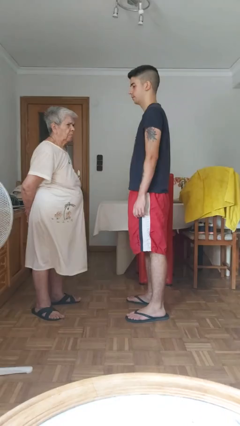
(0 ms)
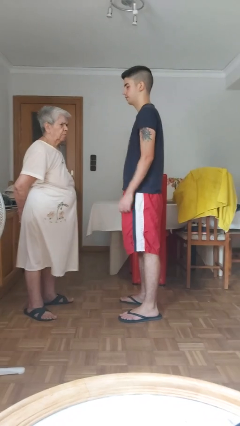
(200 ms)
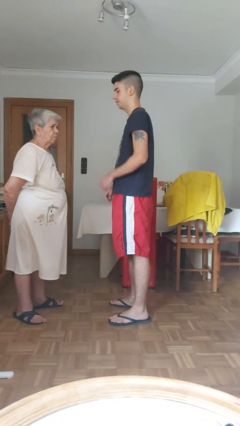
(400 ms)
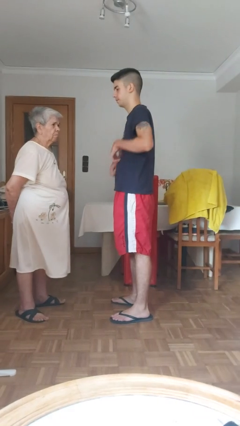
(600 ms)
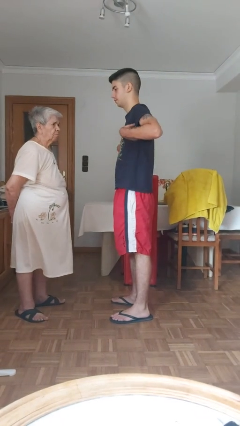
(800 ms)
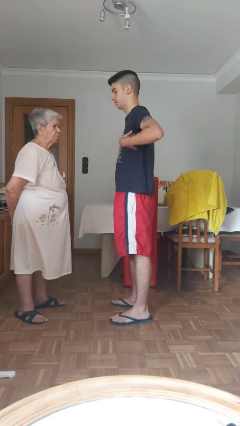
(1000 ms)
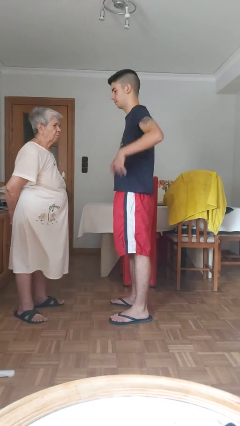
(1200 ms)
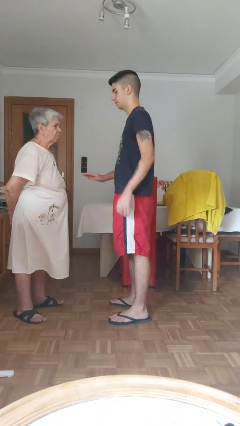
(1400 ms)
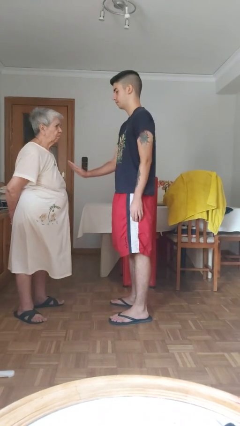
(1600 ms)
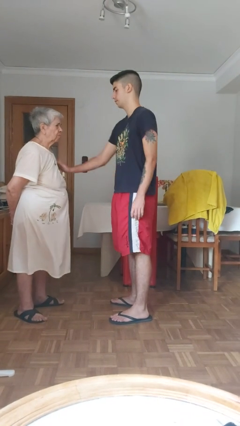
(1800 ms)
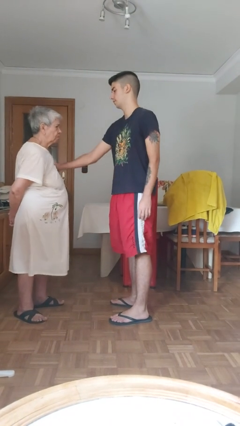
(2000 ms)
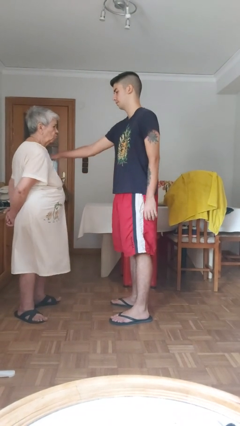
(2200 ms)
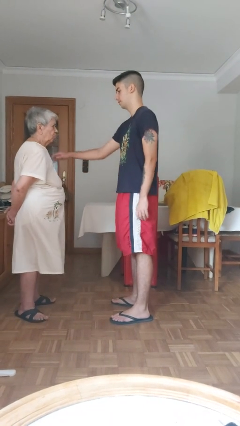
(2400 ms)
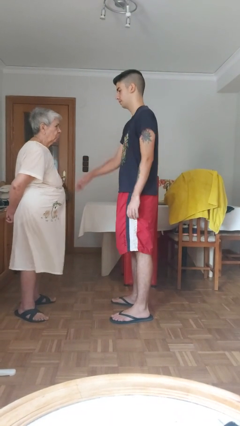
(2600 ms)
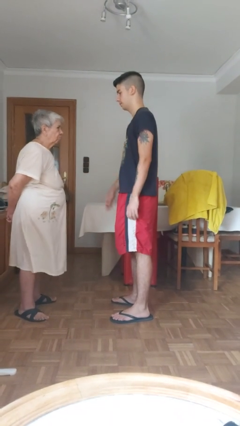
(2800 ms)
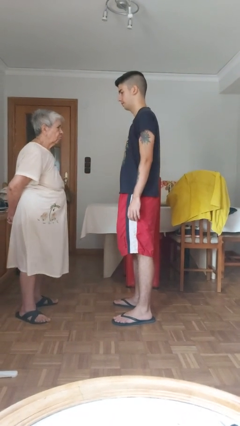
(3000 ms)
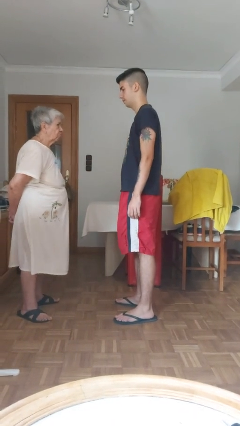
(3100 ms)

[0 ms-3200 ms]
person shoves person

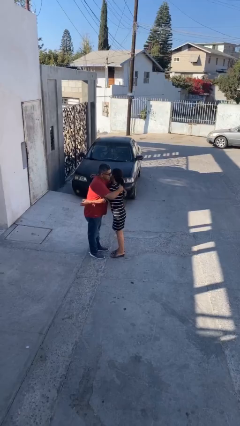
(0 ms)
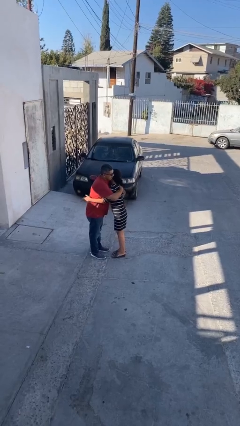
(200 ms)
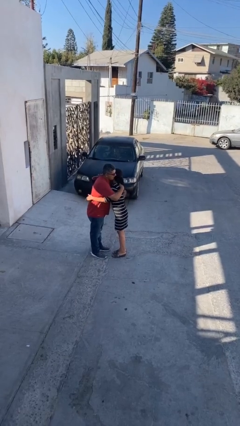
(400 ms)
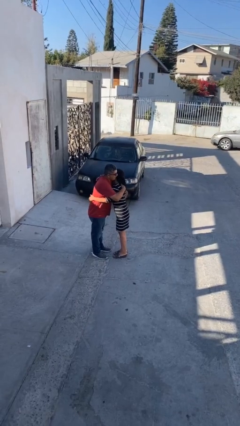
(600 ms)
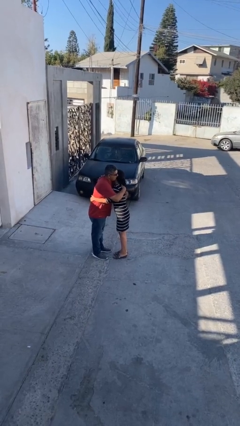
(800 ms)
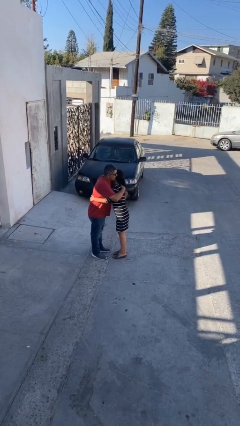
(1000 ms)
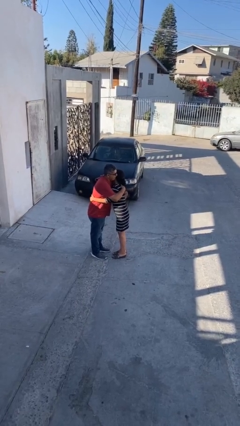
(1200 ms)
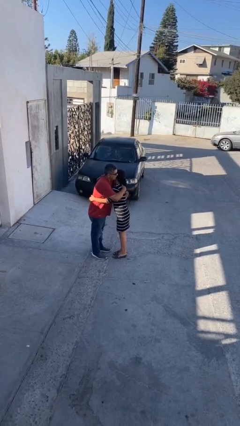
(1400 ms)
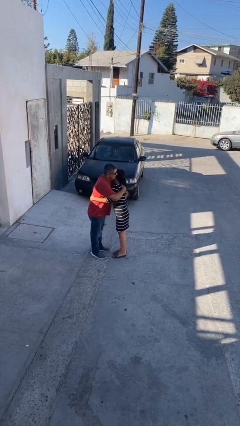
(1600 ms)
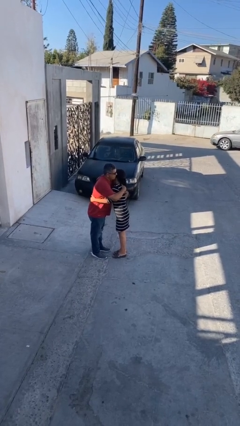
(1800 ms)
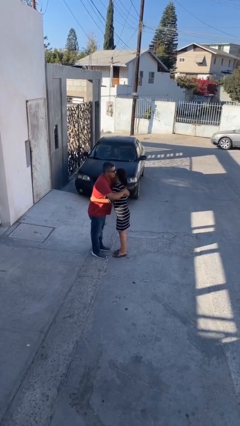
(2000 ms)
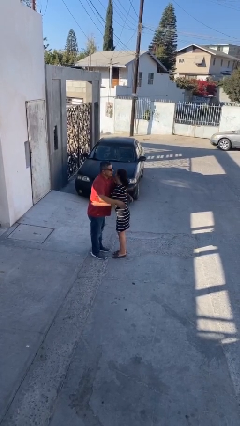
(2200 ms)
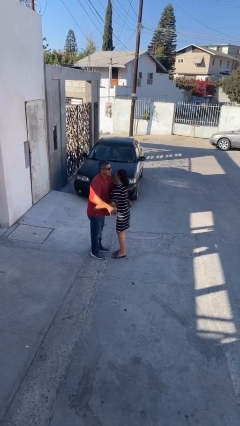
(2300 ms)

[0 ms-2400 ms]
person embraces person

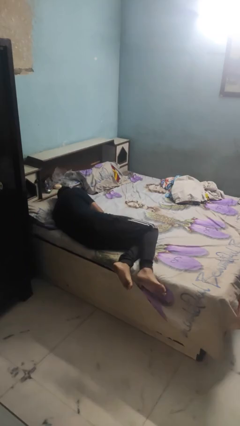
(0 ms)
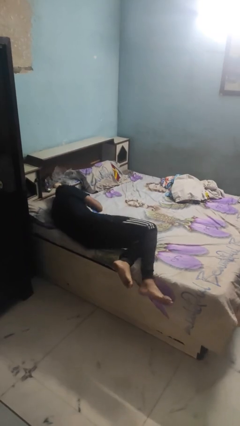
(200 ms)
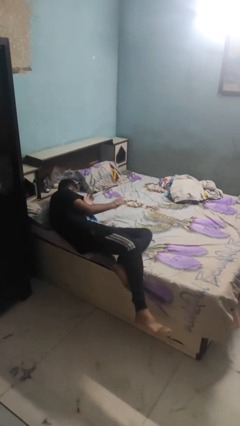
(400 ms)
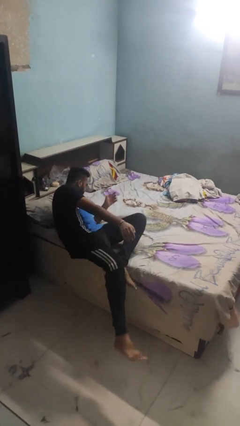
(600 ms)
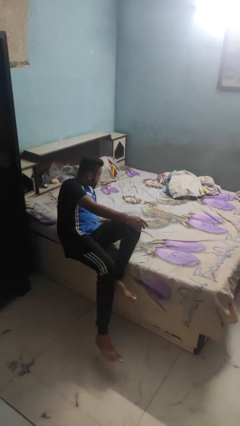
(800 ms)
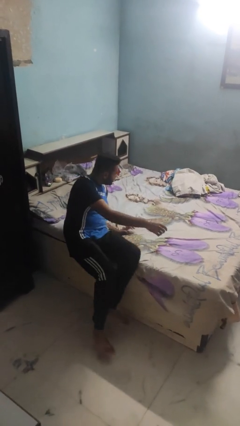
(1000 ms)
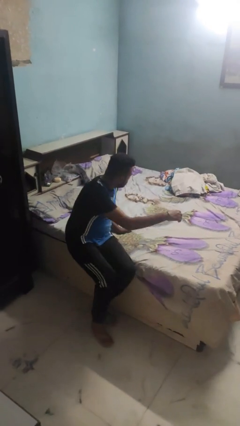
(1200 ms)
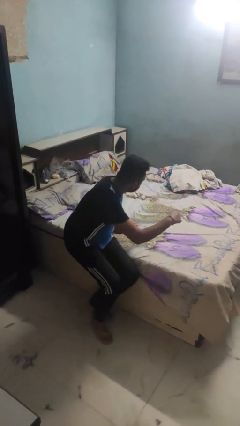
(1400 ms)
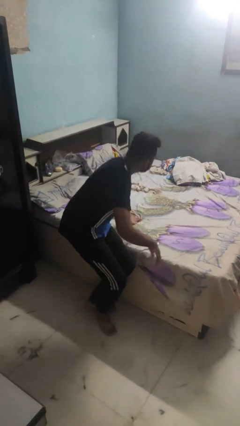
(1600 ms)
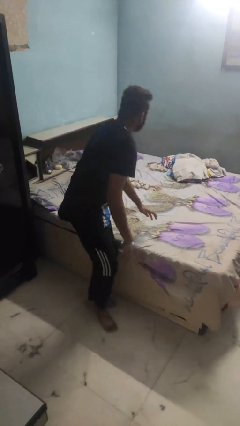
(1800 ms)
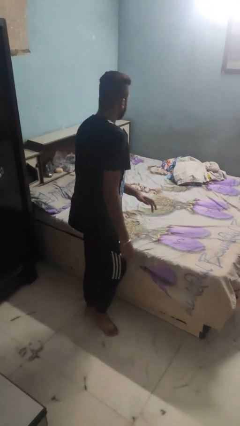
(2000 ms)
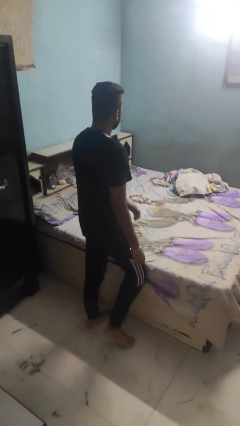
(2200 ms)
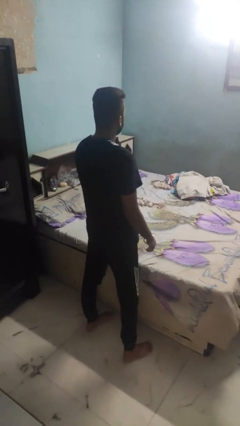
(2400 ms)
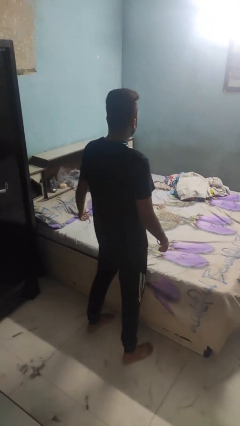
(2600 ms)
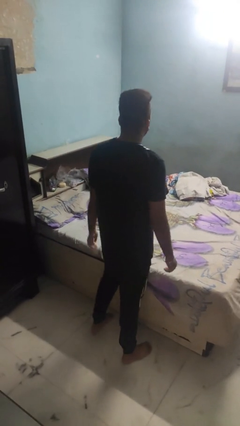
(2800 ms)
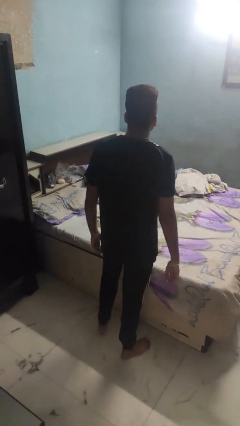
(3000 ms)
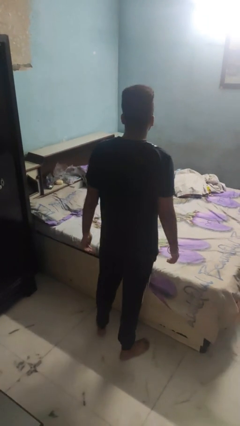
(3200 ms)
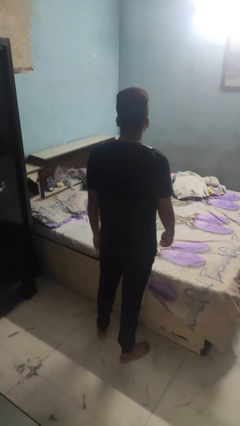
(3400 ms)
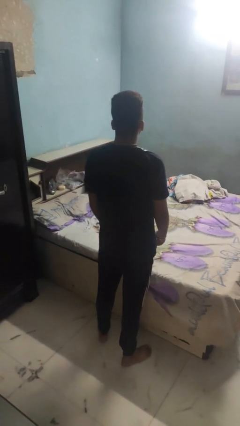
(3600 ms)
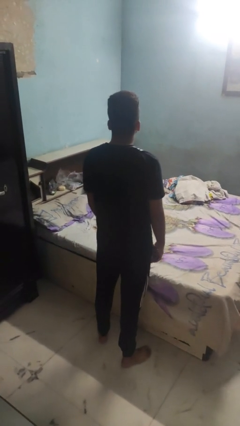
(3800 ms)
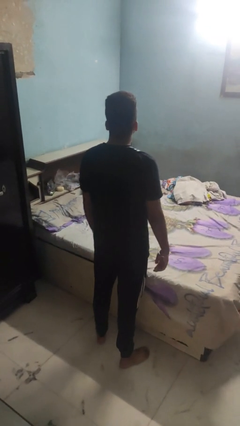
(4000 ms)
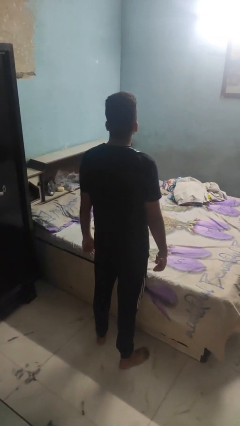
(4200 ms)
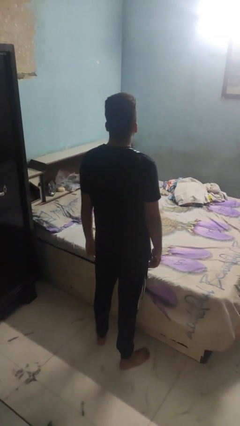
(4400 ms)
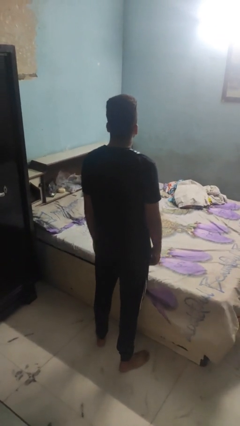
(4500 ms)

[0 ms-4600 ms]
person stands up

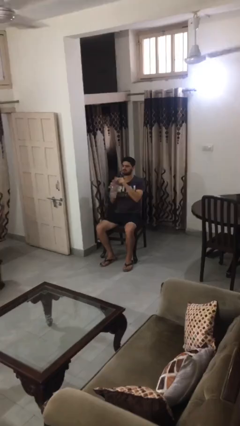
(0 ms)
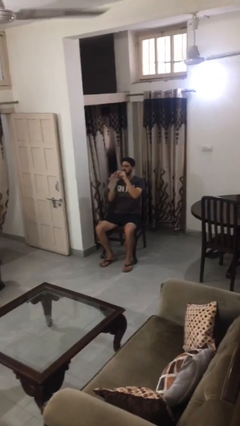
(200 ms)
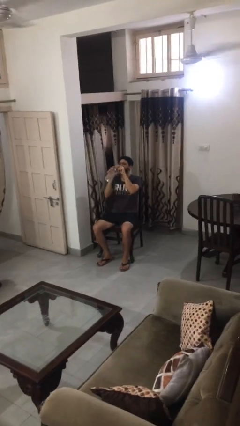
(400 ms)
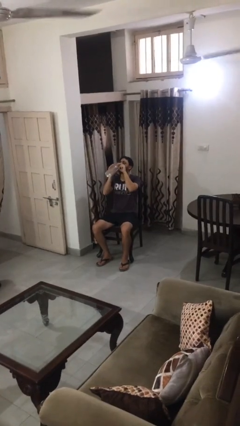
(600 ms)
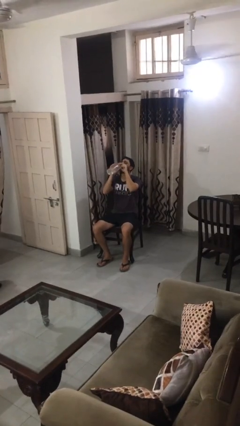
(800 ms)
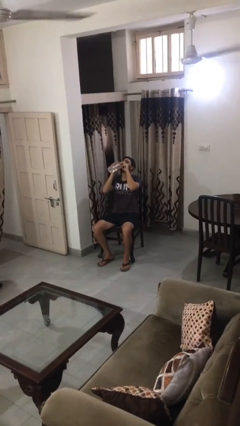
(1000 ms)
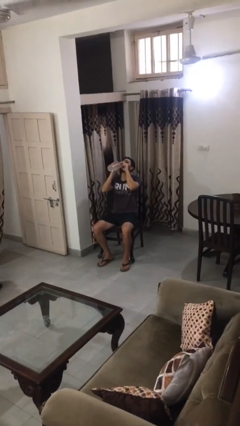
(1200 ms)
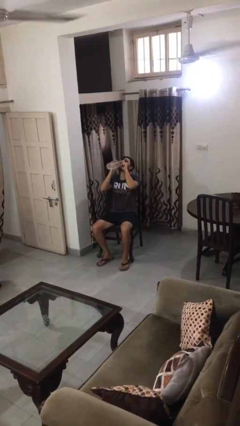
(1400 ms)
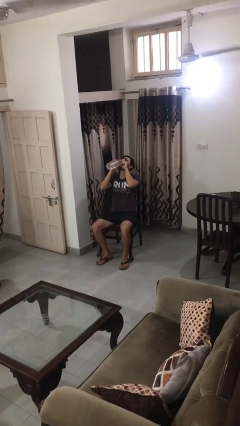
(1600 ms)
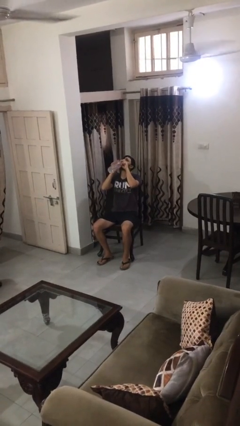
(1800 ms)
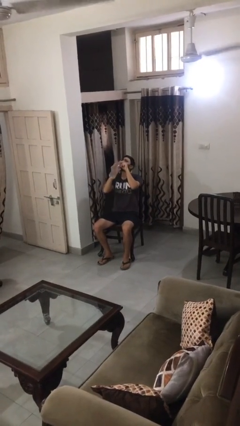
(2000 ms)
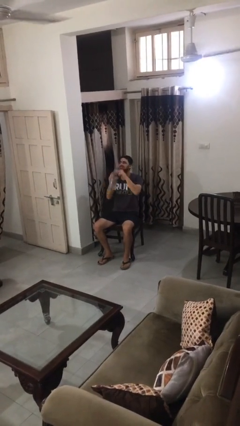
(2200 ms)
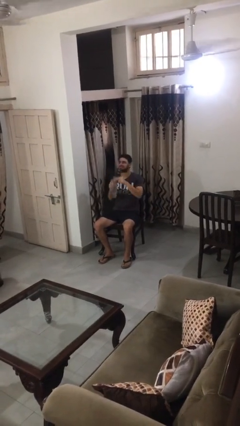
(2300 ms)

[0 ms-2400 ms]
person drinks from bottle

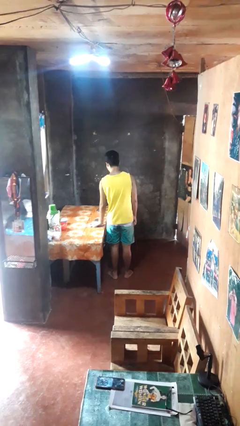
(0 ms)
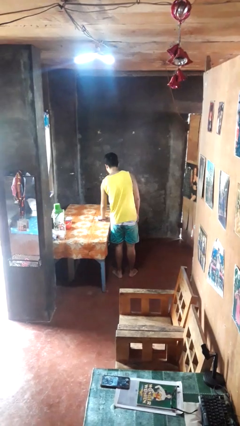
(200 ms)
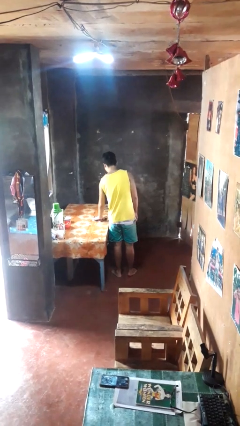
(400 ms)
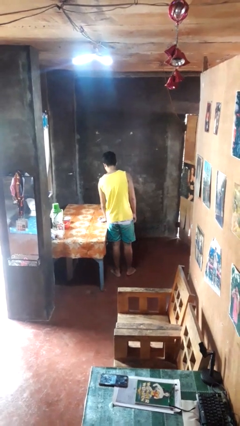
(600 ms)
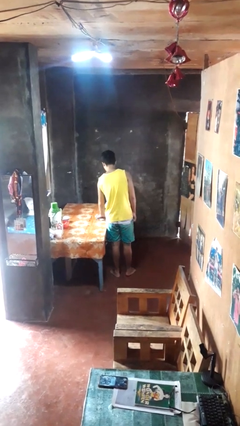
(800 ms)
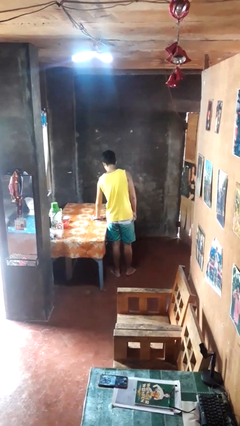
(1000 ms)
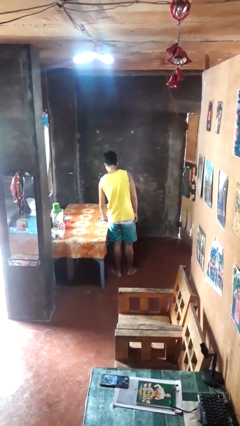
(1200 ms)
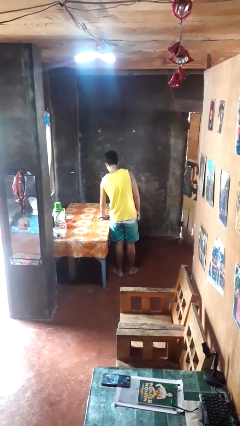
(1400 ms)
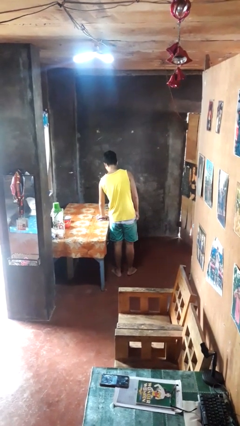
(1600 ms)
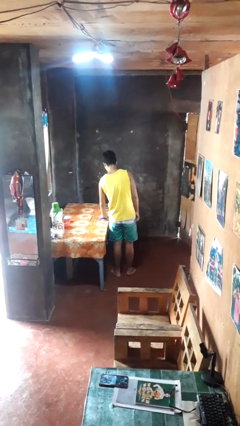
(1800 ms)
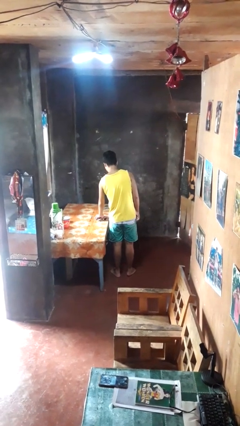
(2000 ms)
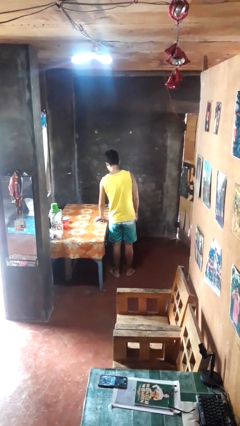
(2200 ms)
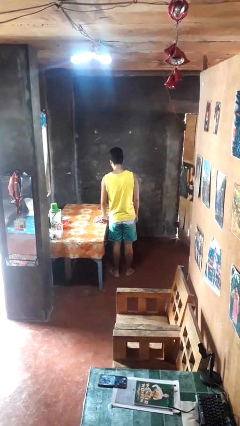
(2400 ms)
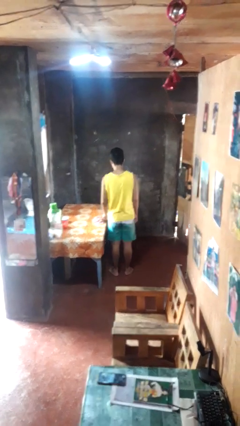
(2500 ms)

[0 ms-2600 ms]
person cleans table with rag

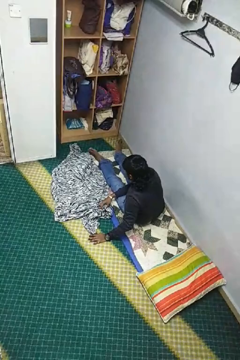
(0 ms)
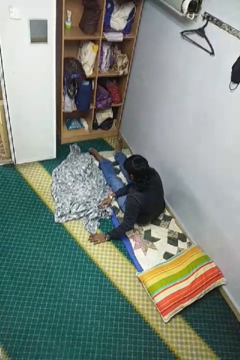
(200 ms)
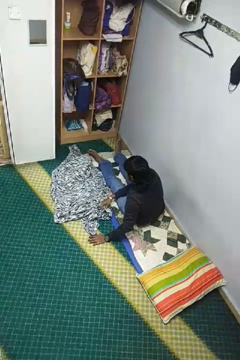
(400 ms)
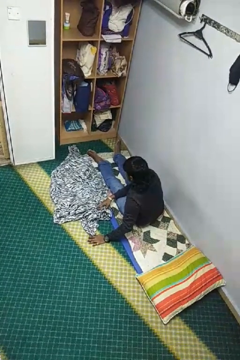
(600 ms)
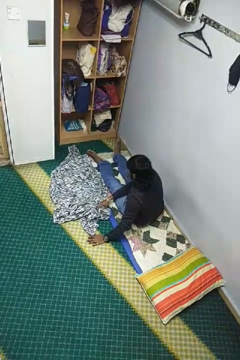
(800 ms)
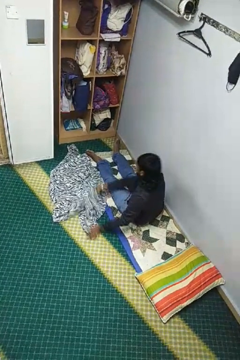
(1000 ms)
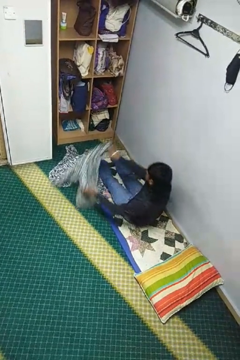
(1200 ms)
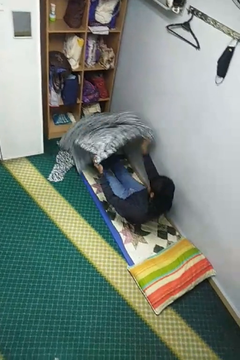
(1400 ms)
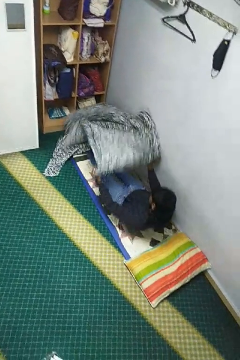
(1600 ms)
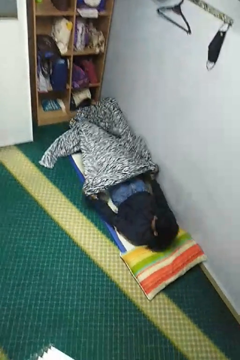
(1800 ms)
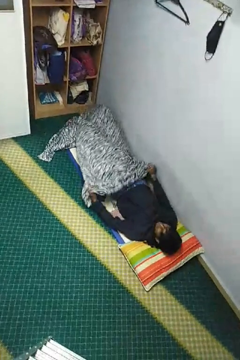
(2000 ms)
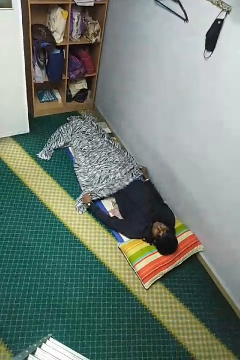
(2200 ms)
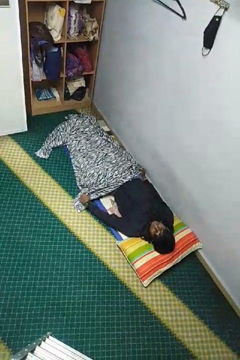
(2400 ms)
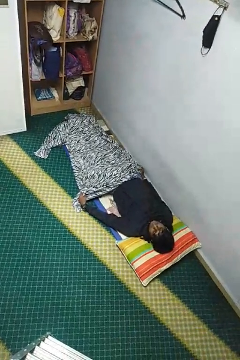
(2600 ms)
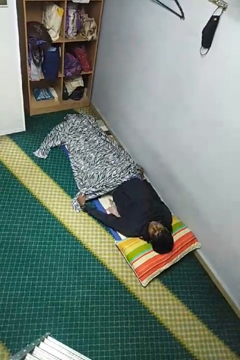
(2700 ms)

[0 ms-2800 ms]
person covers with blanket
